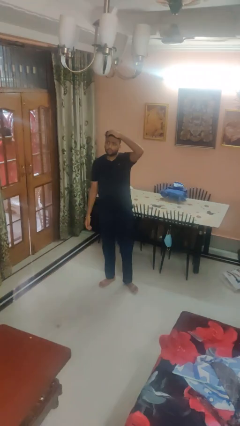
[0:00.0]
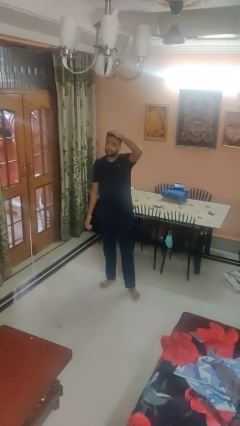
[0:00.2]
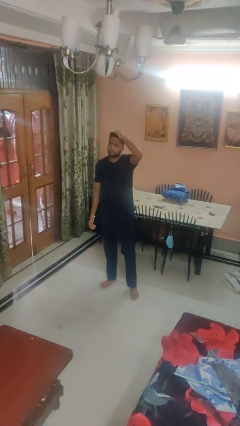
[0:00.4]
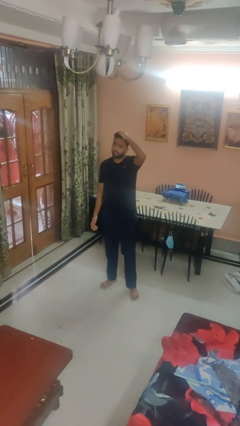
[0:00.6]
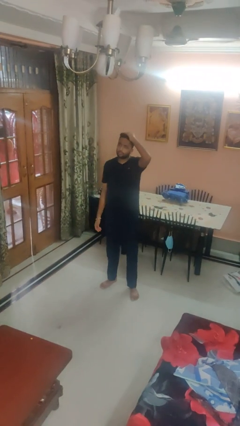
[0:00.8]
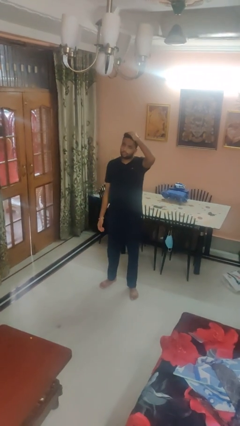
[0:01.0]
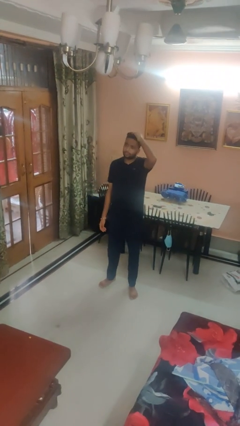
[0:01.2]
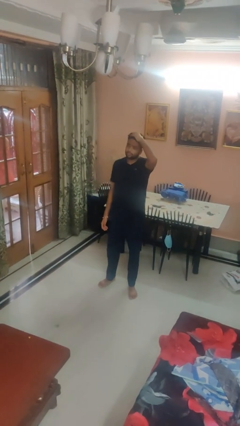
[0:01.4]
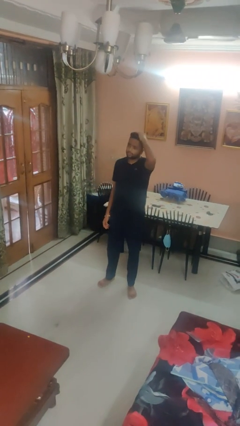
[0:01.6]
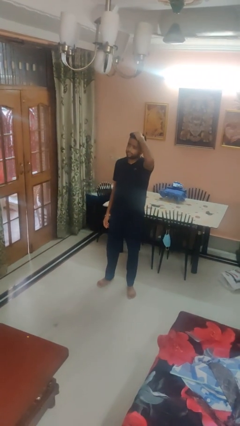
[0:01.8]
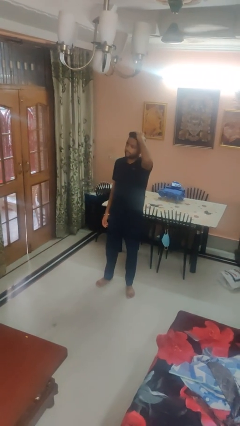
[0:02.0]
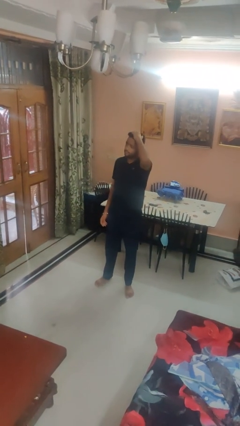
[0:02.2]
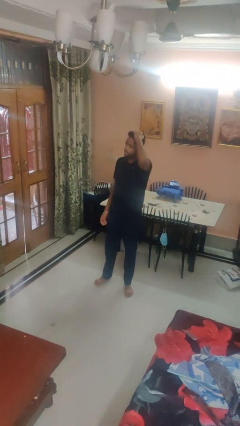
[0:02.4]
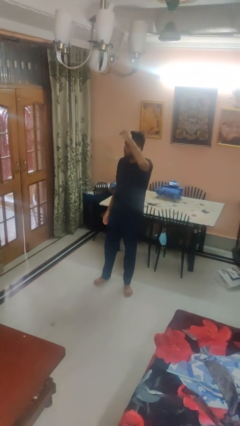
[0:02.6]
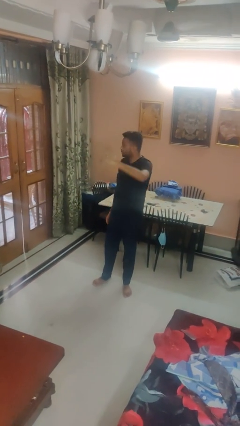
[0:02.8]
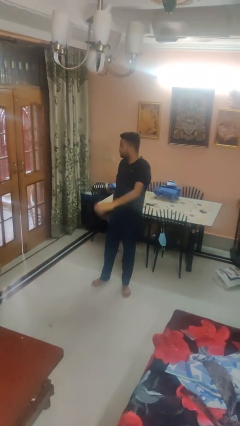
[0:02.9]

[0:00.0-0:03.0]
person pats head

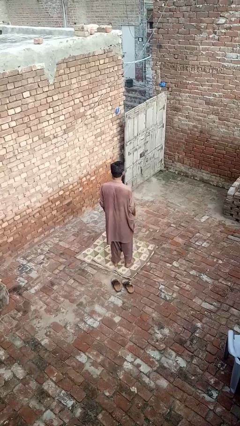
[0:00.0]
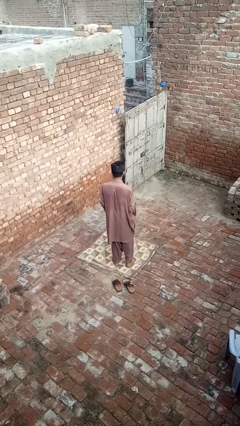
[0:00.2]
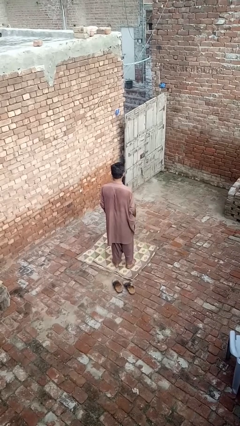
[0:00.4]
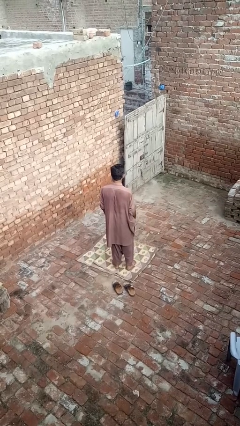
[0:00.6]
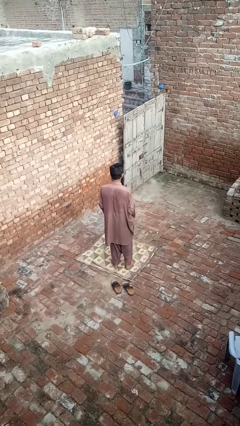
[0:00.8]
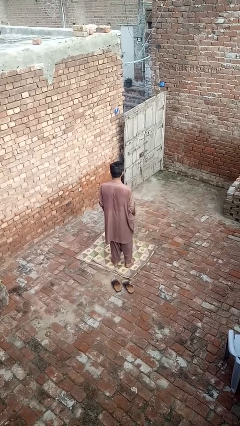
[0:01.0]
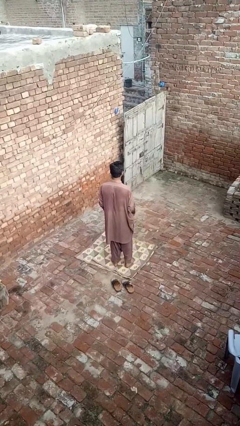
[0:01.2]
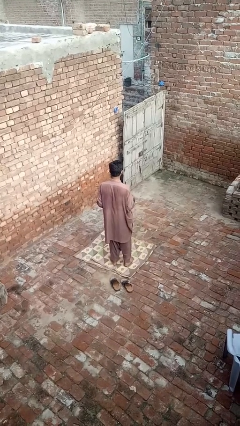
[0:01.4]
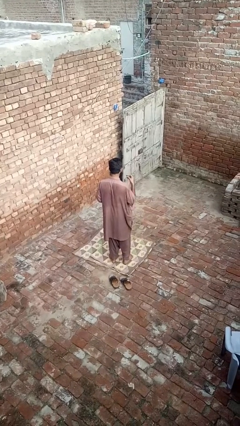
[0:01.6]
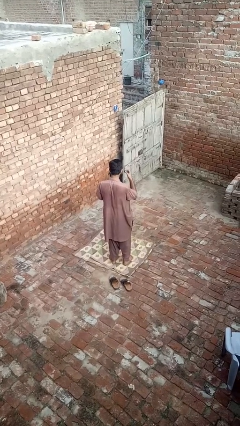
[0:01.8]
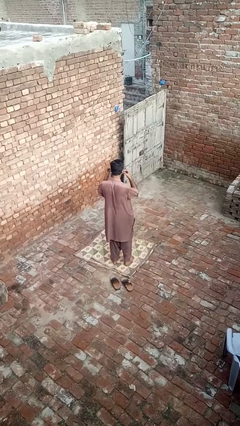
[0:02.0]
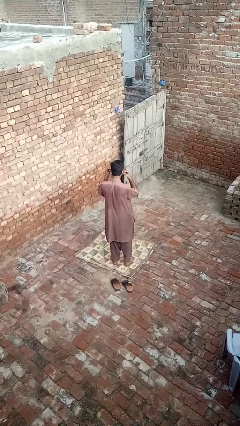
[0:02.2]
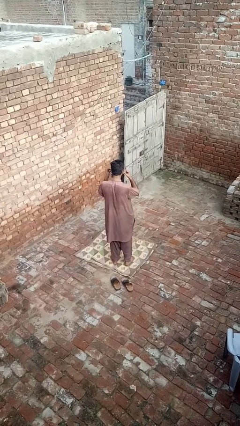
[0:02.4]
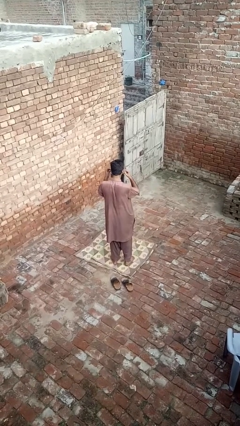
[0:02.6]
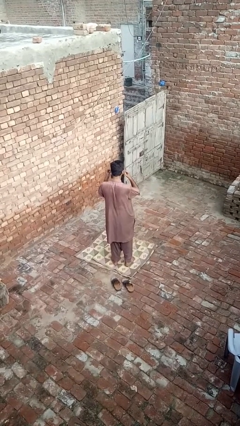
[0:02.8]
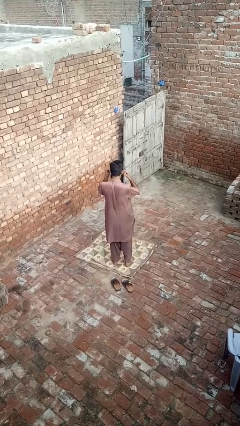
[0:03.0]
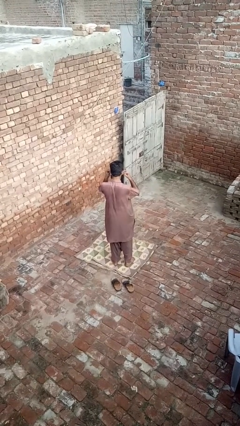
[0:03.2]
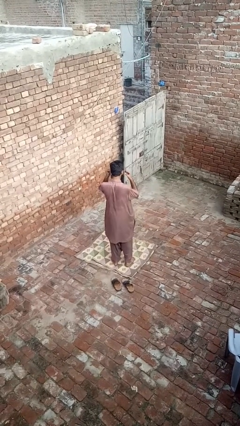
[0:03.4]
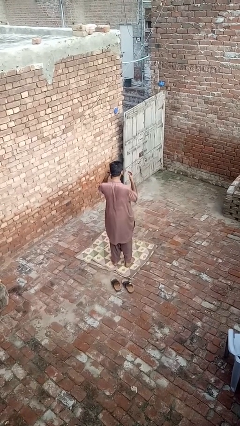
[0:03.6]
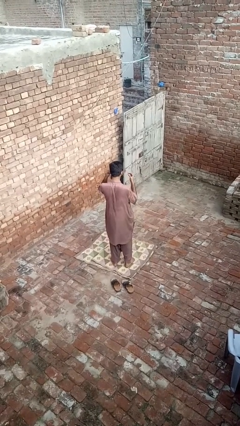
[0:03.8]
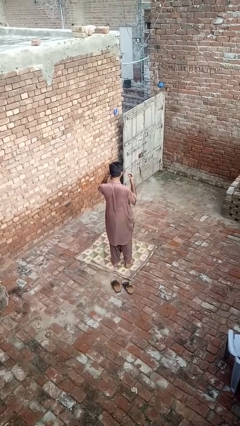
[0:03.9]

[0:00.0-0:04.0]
person puts on headphones

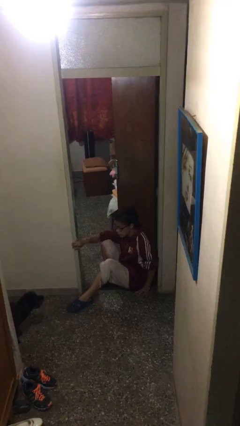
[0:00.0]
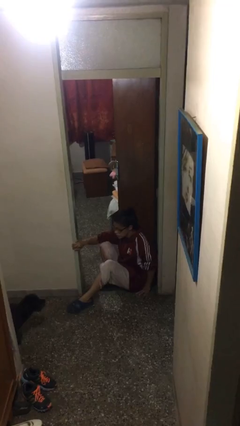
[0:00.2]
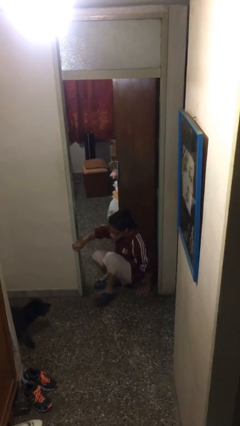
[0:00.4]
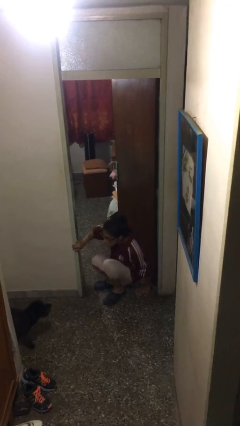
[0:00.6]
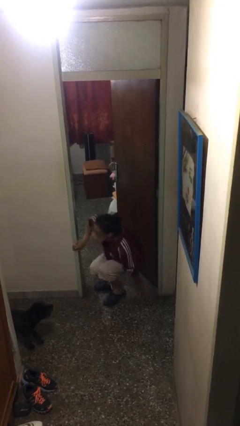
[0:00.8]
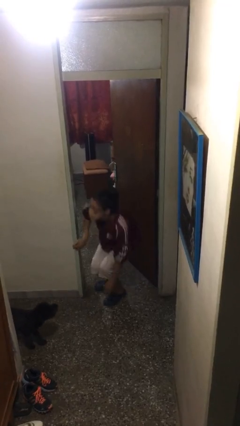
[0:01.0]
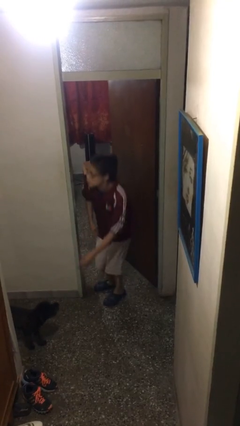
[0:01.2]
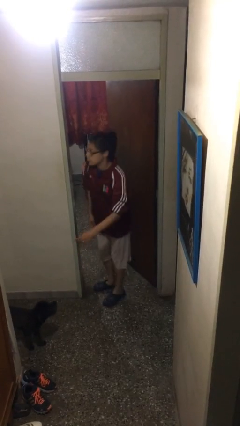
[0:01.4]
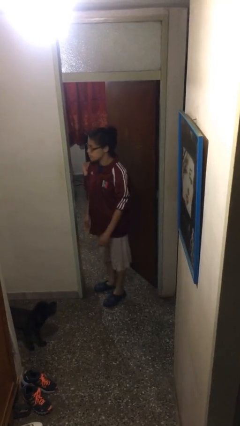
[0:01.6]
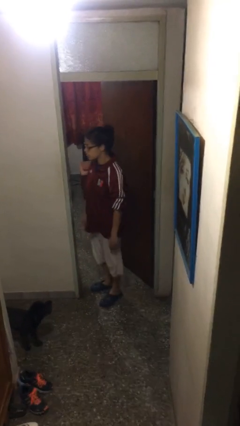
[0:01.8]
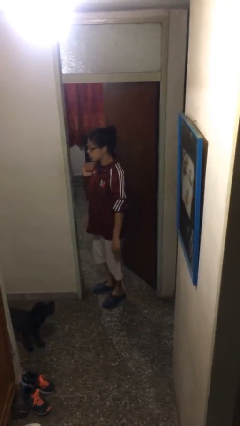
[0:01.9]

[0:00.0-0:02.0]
person stands up

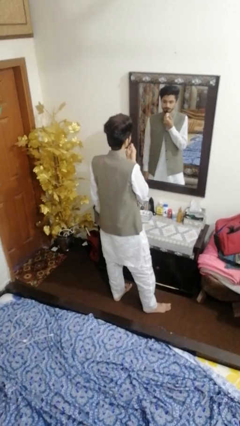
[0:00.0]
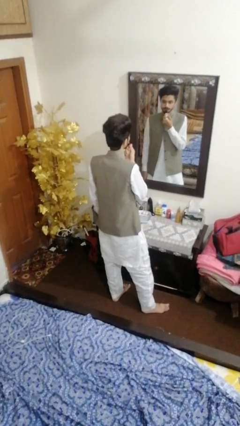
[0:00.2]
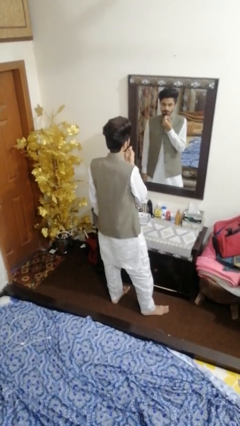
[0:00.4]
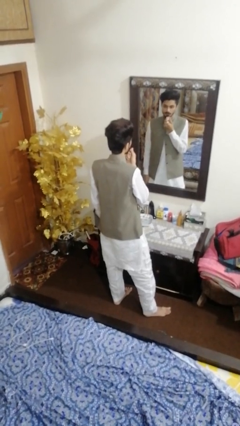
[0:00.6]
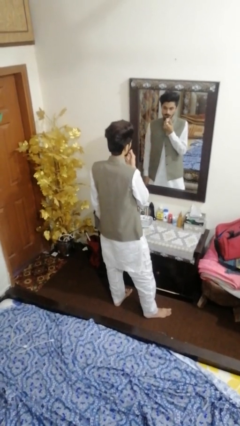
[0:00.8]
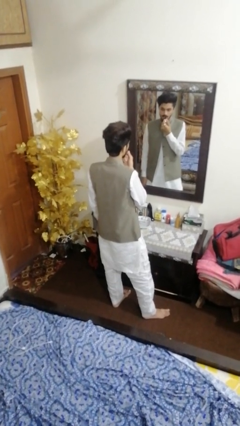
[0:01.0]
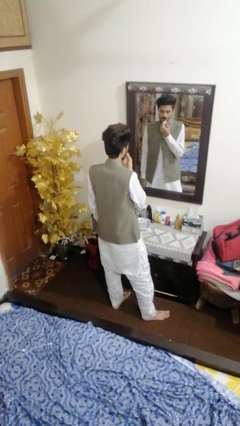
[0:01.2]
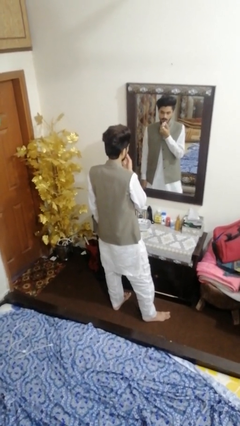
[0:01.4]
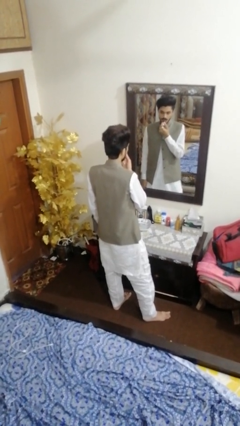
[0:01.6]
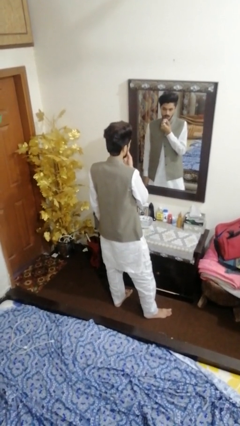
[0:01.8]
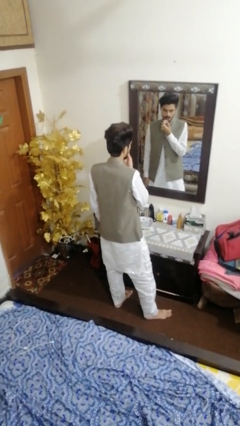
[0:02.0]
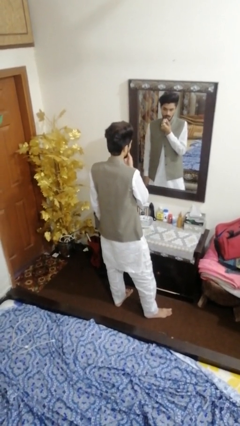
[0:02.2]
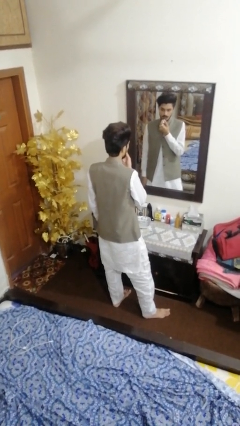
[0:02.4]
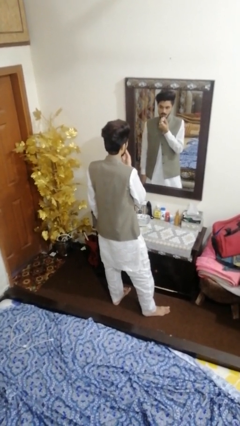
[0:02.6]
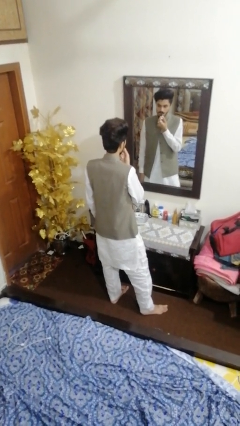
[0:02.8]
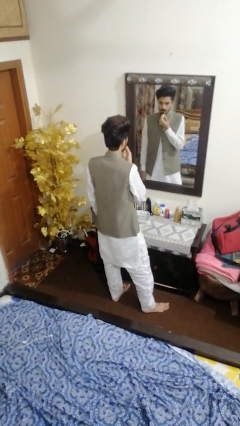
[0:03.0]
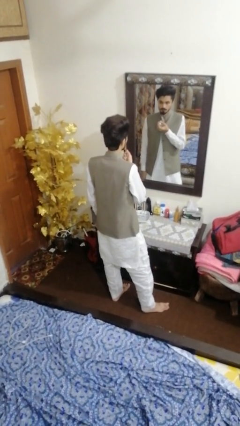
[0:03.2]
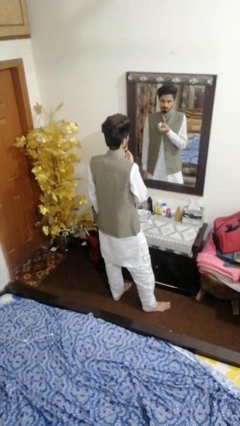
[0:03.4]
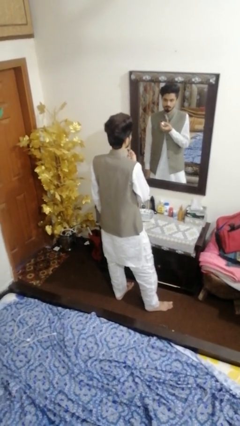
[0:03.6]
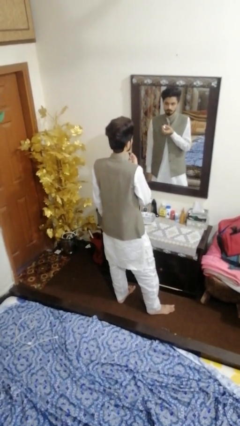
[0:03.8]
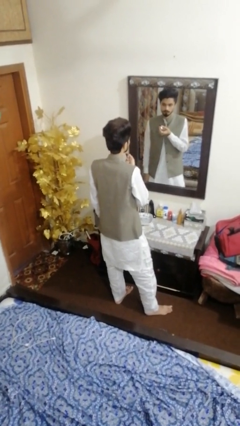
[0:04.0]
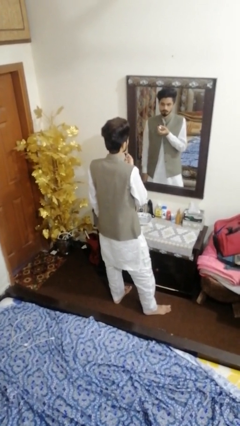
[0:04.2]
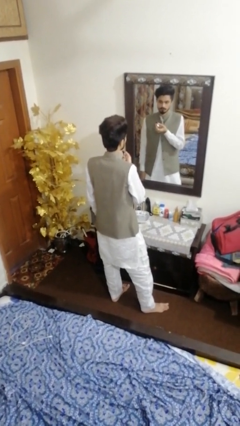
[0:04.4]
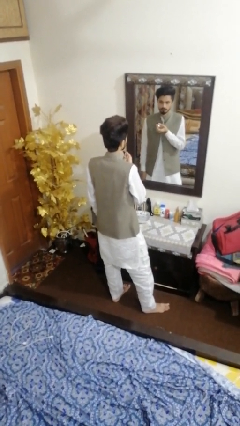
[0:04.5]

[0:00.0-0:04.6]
person applies lip makeup

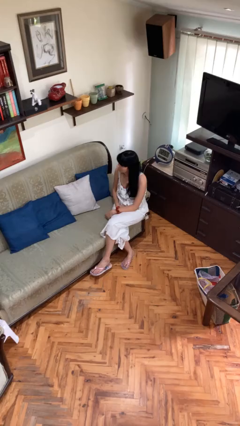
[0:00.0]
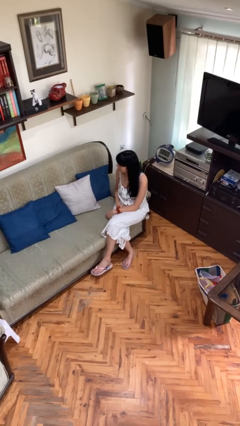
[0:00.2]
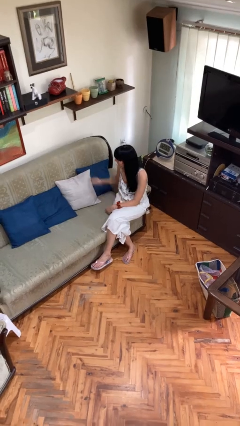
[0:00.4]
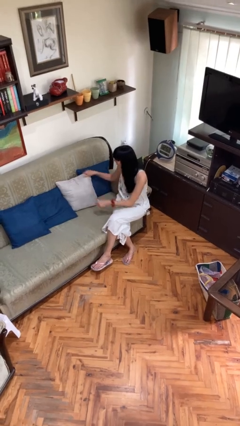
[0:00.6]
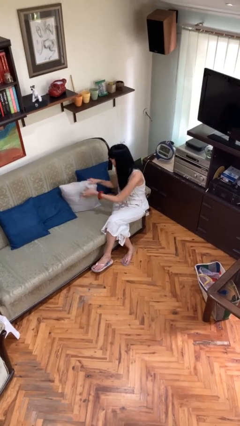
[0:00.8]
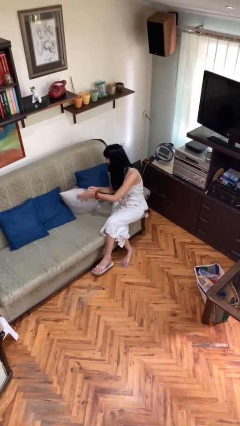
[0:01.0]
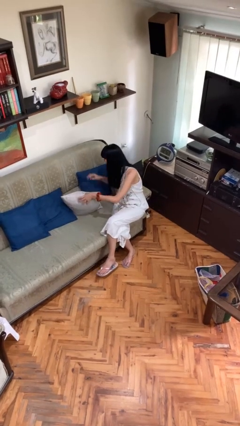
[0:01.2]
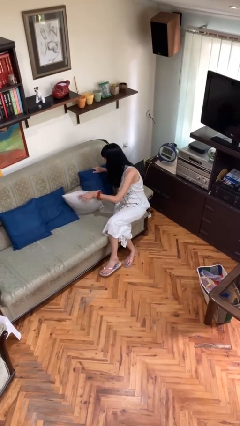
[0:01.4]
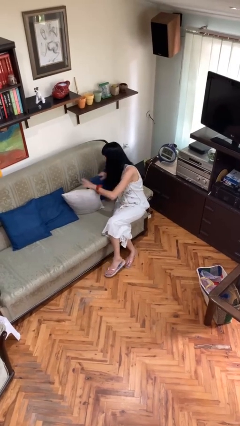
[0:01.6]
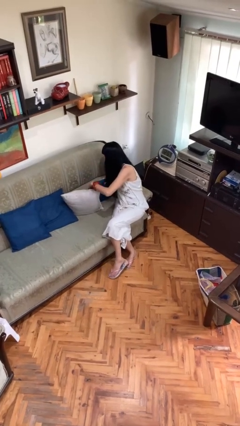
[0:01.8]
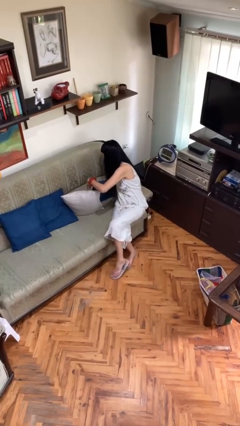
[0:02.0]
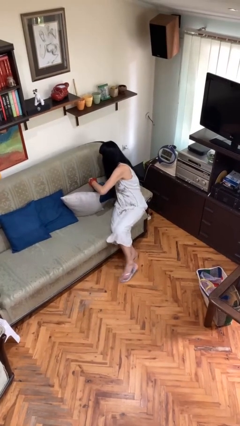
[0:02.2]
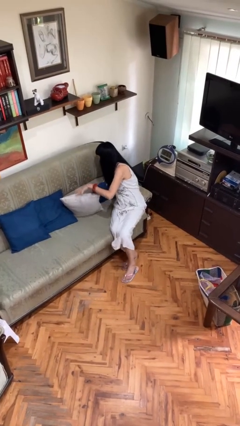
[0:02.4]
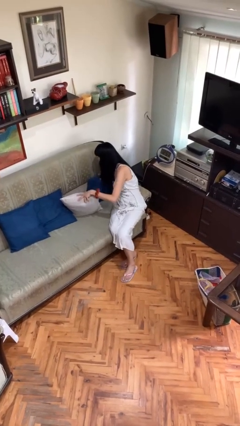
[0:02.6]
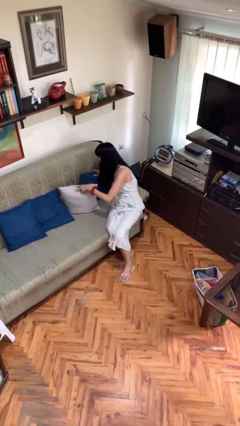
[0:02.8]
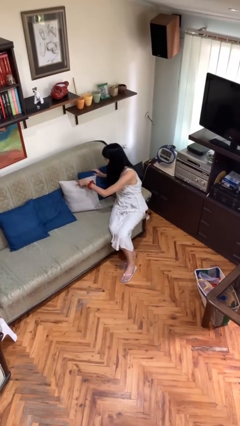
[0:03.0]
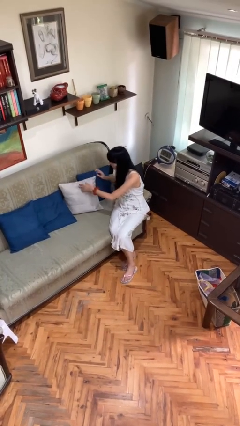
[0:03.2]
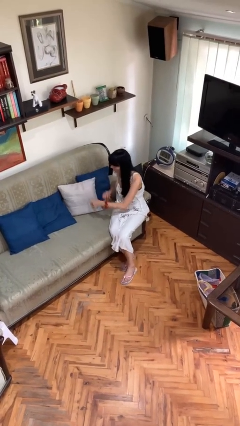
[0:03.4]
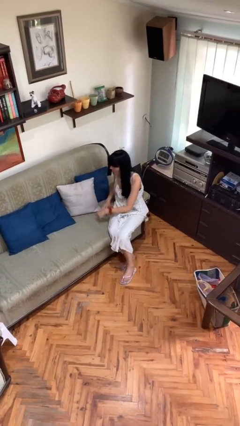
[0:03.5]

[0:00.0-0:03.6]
person searches in couch

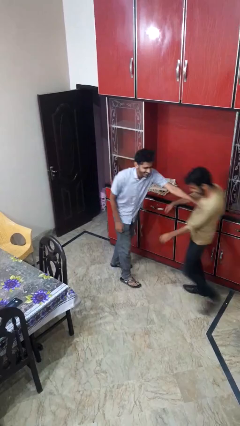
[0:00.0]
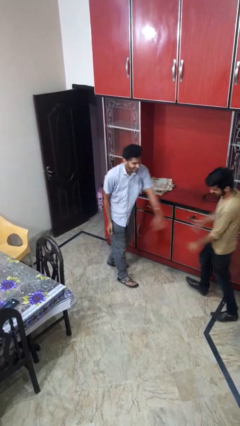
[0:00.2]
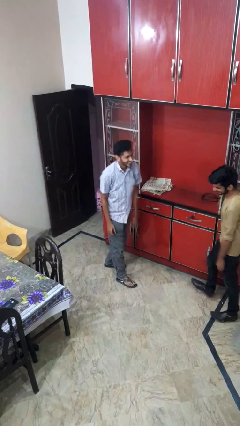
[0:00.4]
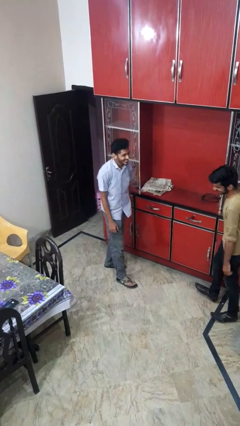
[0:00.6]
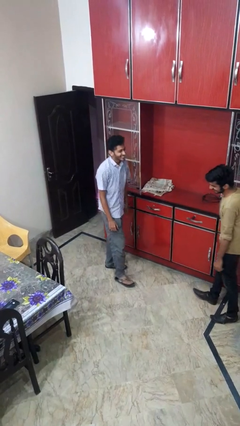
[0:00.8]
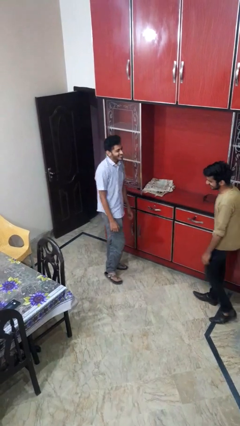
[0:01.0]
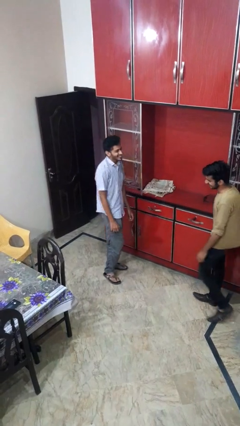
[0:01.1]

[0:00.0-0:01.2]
person shoves person
